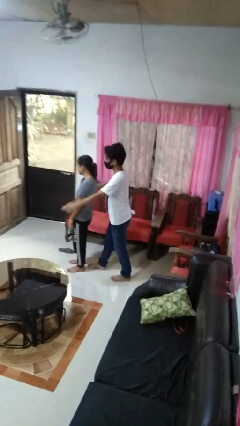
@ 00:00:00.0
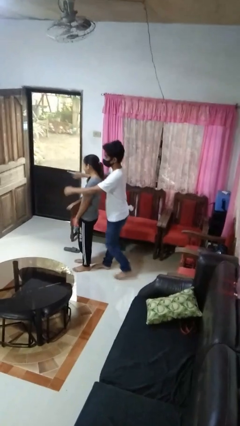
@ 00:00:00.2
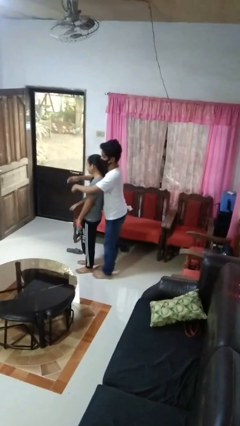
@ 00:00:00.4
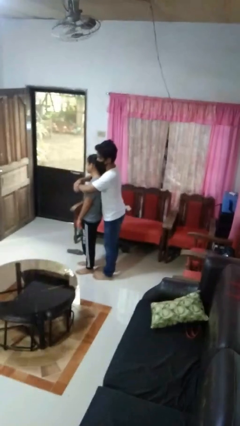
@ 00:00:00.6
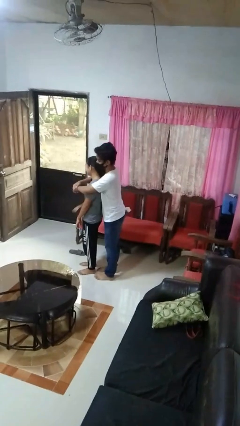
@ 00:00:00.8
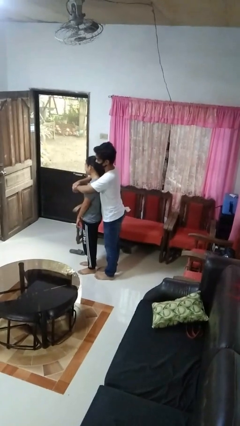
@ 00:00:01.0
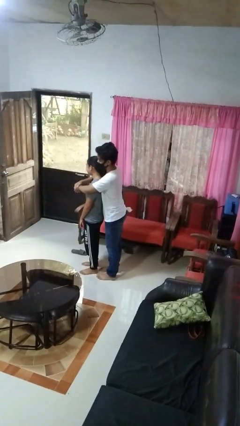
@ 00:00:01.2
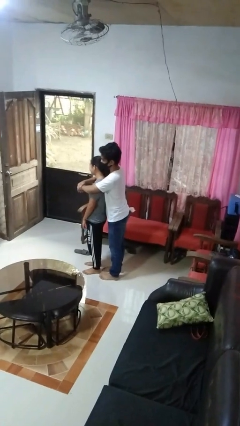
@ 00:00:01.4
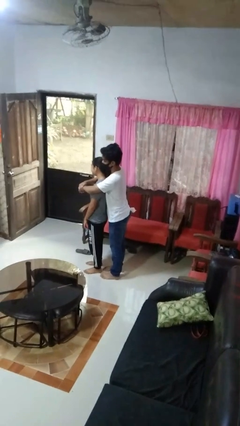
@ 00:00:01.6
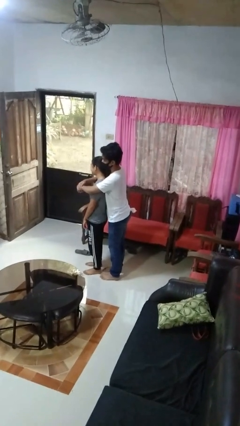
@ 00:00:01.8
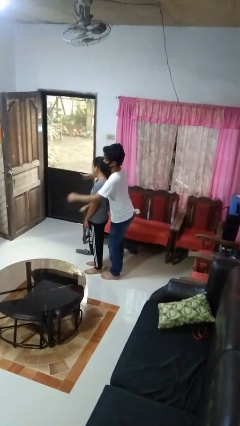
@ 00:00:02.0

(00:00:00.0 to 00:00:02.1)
person hugs person from behind

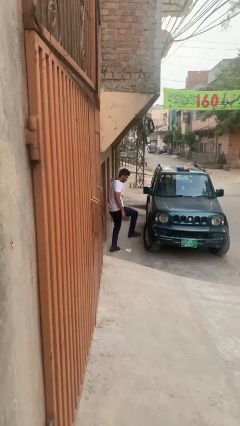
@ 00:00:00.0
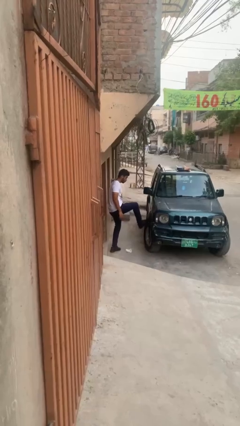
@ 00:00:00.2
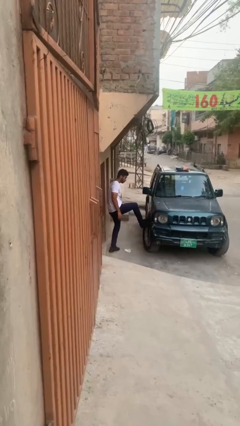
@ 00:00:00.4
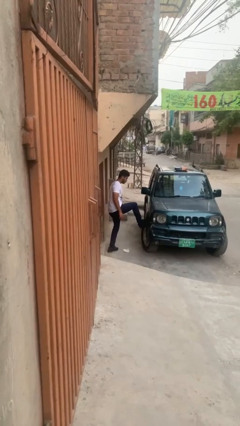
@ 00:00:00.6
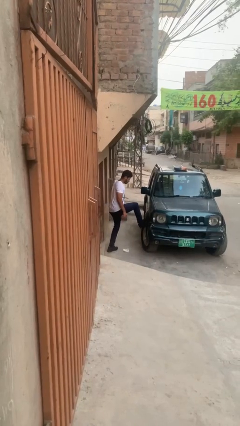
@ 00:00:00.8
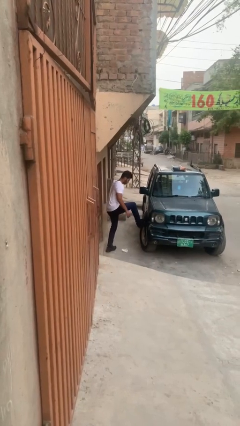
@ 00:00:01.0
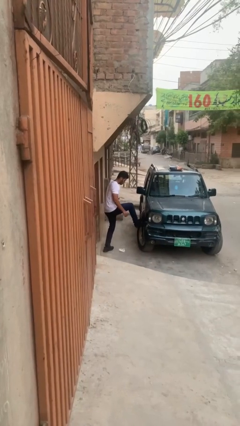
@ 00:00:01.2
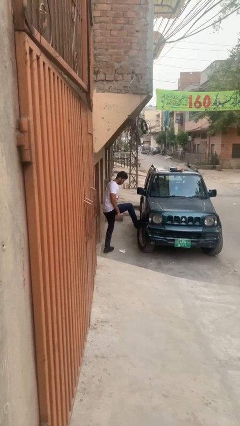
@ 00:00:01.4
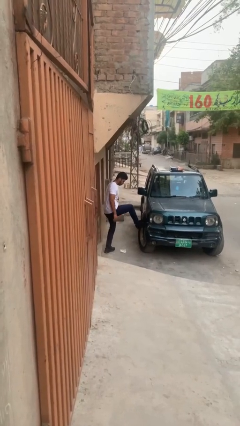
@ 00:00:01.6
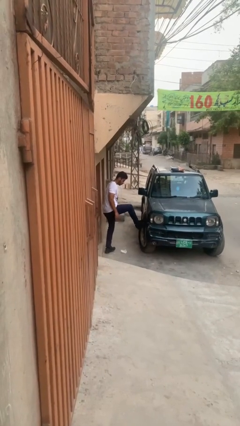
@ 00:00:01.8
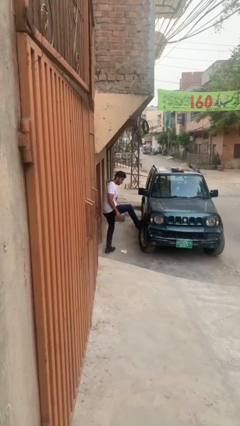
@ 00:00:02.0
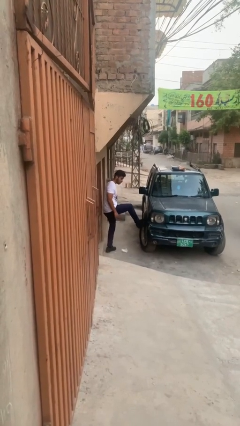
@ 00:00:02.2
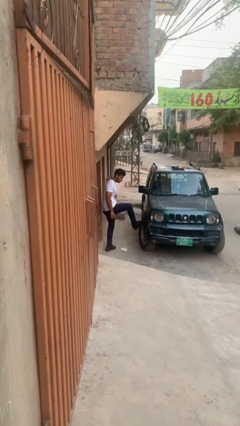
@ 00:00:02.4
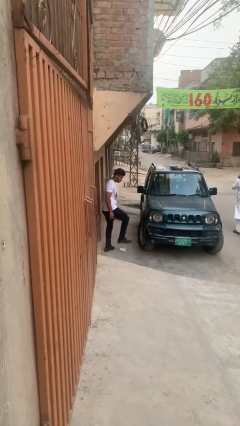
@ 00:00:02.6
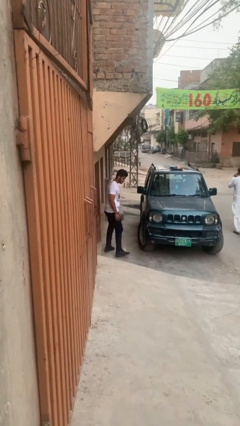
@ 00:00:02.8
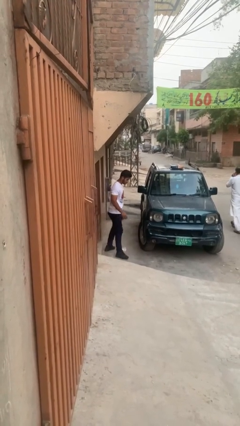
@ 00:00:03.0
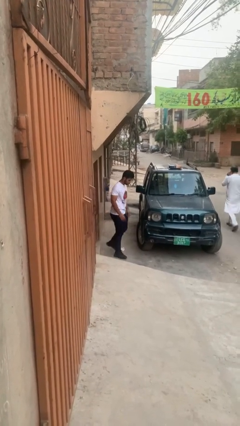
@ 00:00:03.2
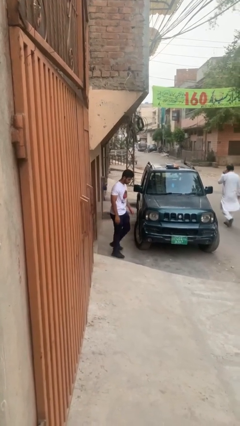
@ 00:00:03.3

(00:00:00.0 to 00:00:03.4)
person kicks car tires

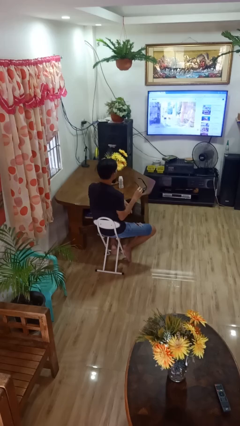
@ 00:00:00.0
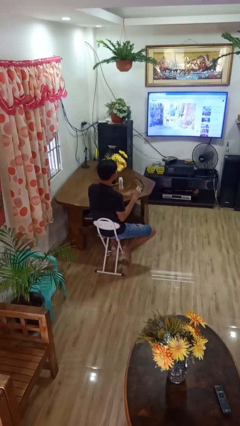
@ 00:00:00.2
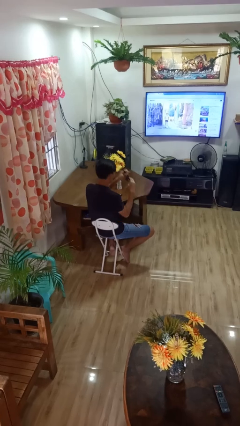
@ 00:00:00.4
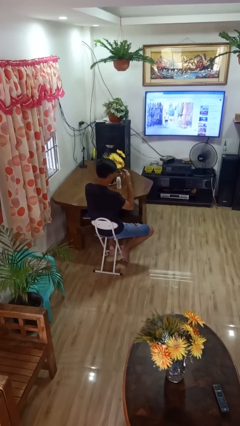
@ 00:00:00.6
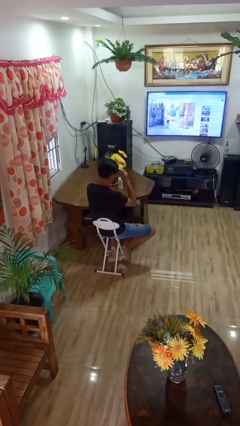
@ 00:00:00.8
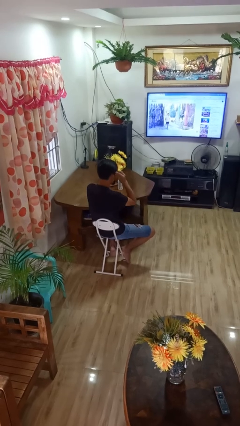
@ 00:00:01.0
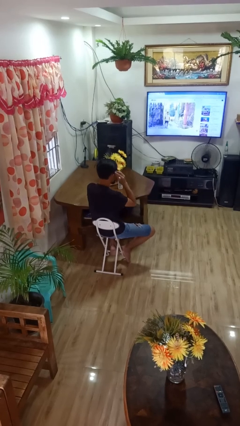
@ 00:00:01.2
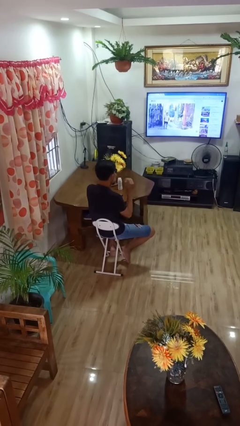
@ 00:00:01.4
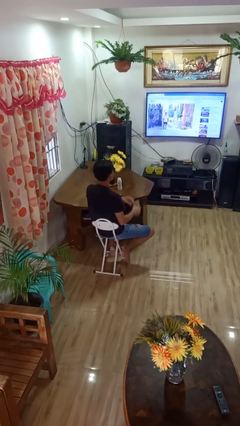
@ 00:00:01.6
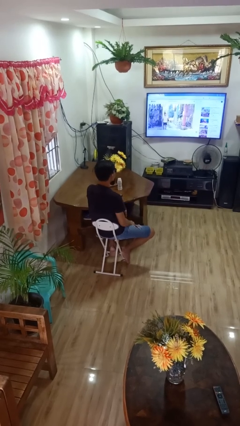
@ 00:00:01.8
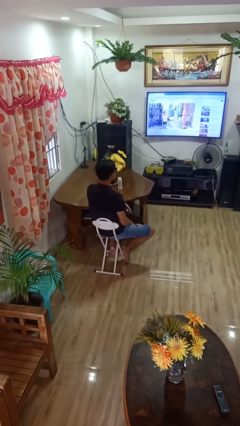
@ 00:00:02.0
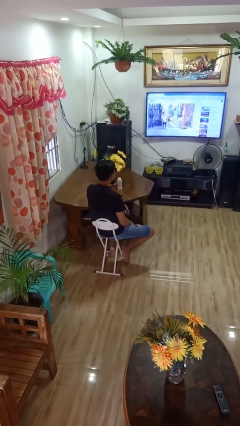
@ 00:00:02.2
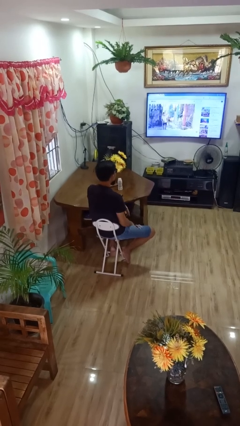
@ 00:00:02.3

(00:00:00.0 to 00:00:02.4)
person puts on sunglasses

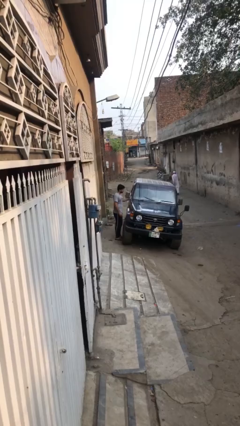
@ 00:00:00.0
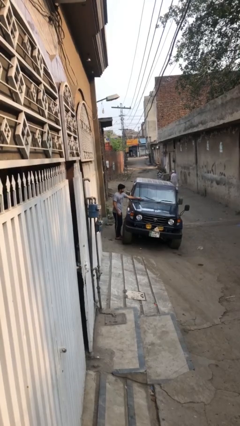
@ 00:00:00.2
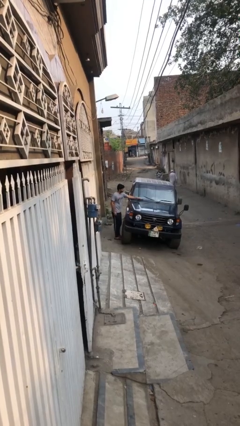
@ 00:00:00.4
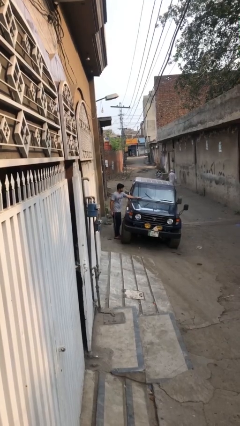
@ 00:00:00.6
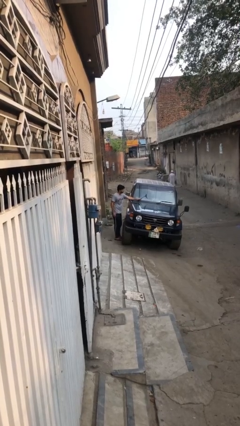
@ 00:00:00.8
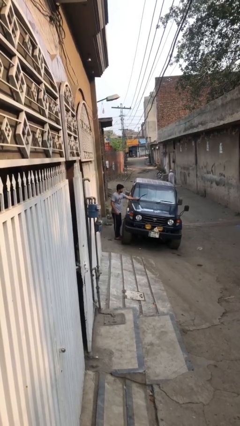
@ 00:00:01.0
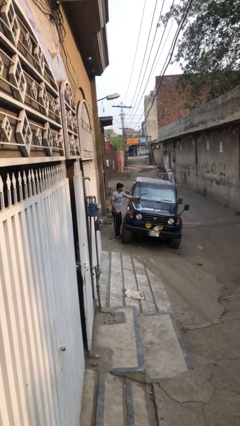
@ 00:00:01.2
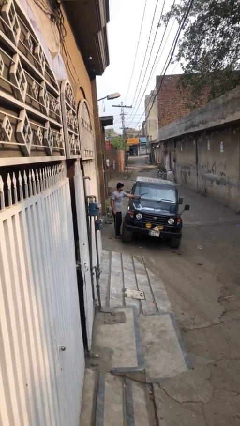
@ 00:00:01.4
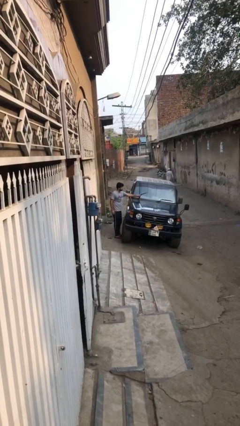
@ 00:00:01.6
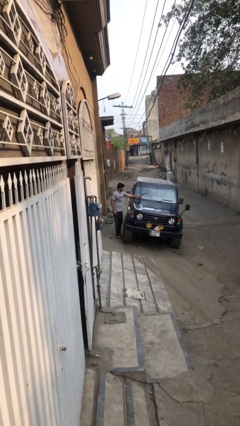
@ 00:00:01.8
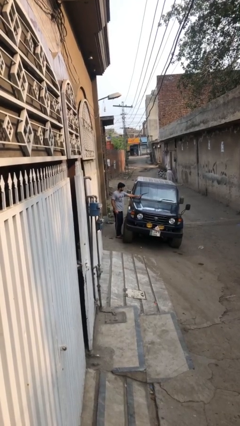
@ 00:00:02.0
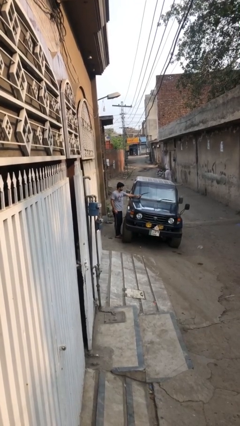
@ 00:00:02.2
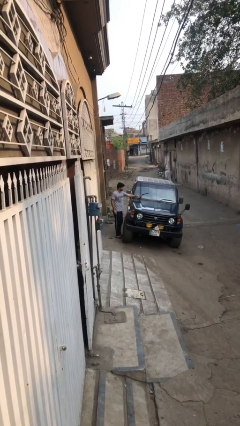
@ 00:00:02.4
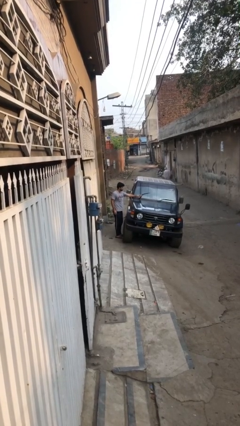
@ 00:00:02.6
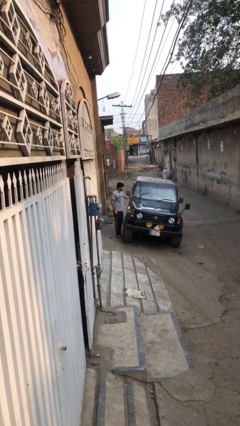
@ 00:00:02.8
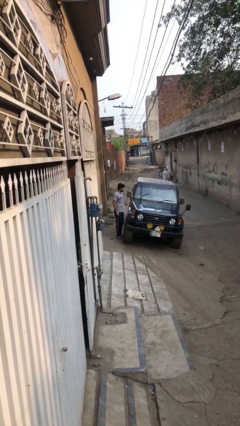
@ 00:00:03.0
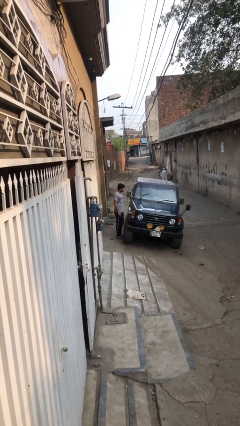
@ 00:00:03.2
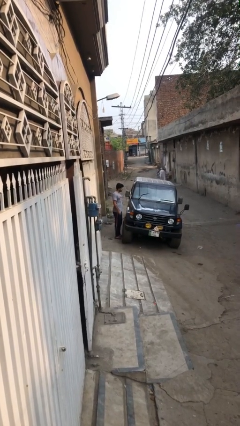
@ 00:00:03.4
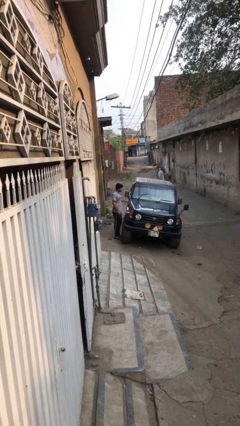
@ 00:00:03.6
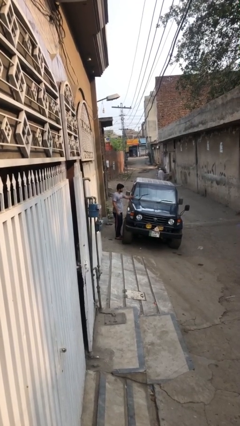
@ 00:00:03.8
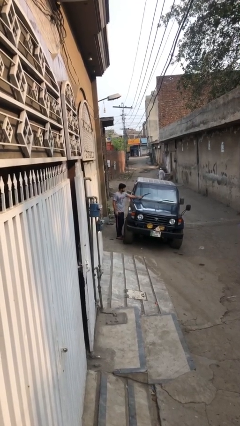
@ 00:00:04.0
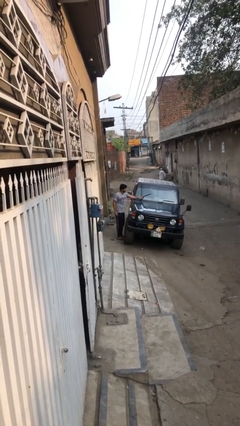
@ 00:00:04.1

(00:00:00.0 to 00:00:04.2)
person flips up car wipers

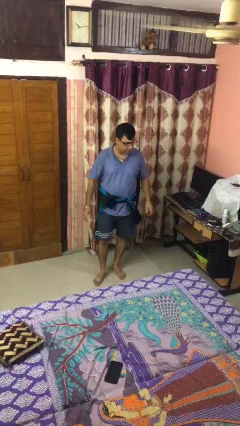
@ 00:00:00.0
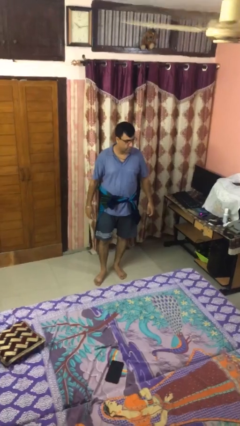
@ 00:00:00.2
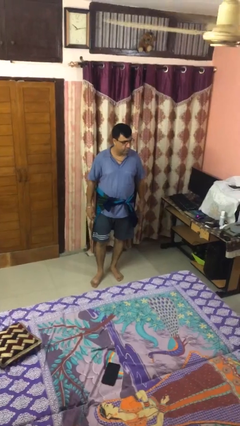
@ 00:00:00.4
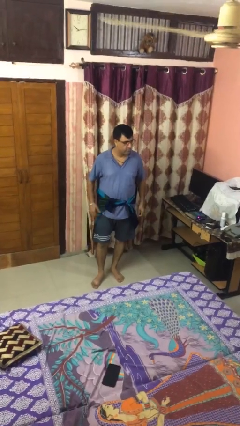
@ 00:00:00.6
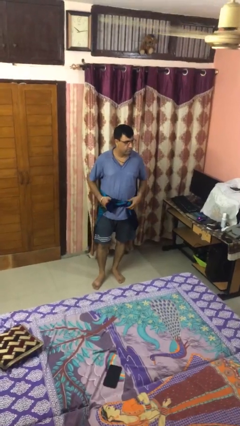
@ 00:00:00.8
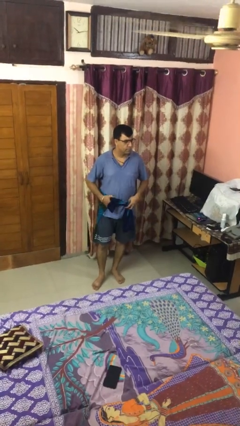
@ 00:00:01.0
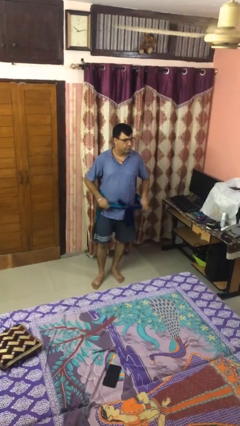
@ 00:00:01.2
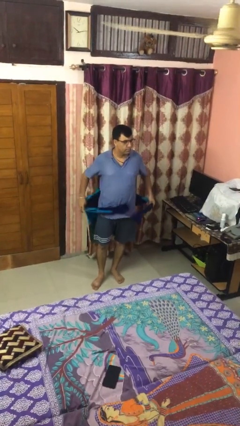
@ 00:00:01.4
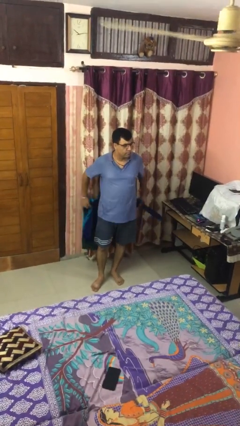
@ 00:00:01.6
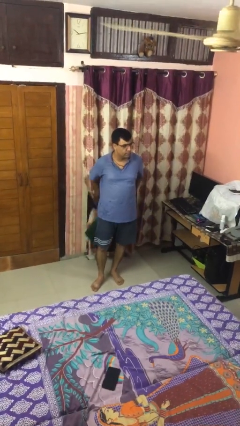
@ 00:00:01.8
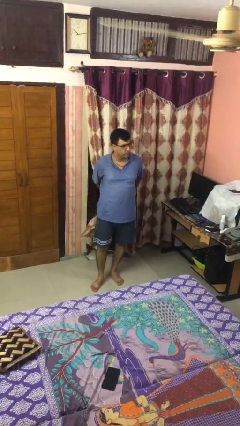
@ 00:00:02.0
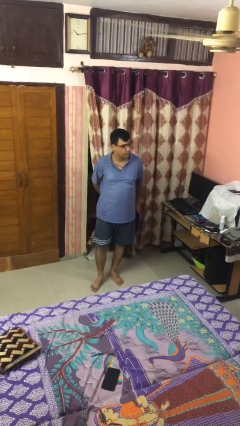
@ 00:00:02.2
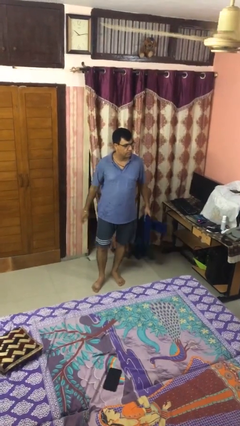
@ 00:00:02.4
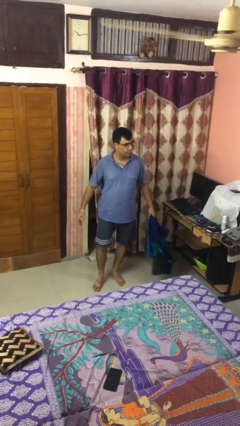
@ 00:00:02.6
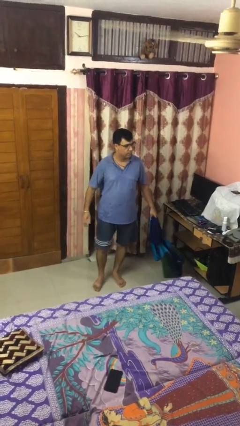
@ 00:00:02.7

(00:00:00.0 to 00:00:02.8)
person unties jacket around waist

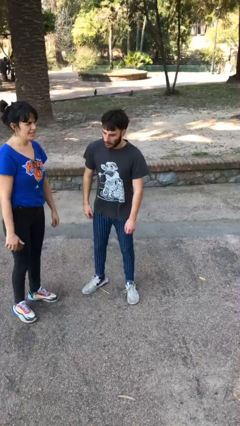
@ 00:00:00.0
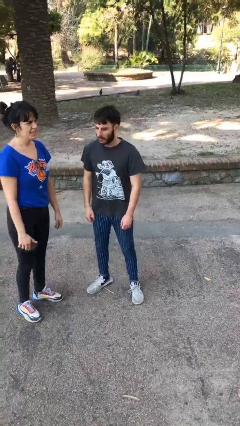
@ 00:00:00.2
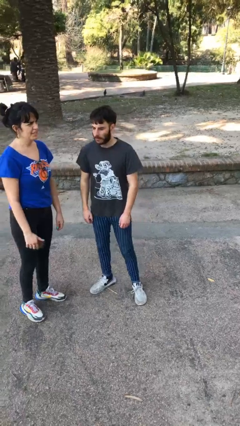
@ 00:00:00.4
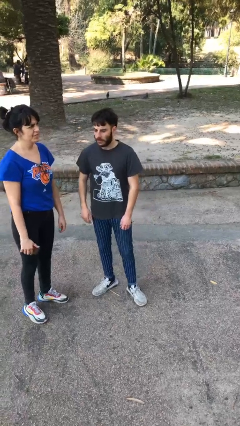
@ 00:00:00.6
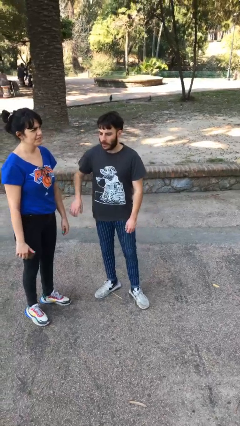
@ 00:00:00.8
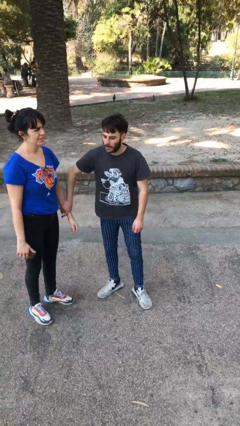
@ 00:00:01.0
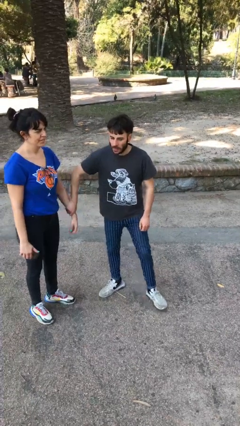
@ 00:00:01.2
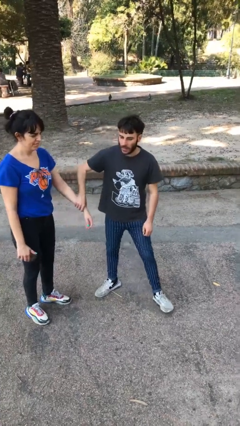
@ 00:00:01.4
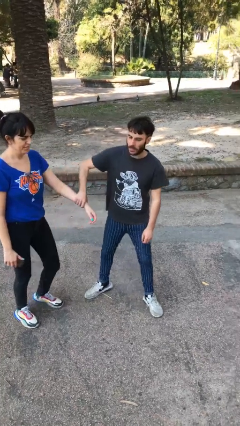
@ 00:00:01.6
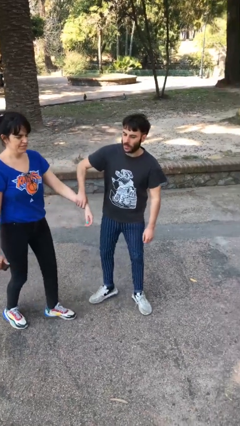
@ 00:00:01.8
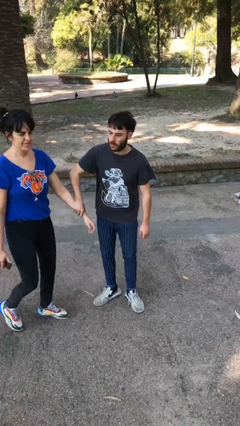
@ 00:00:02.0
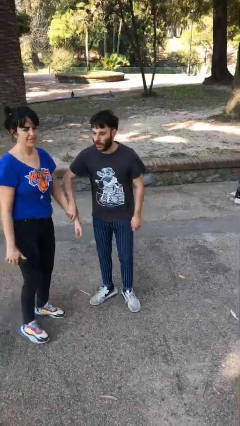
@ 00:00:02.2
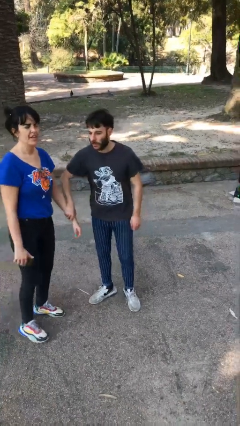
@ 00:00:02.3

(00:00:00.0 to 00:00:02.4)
person grabs person by forearm
